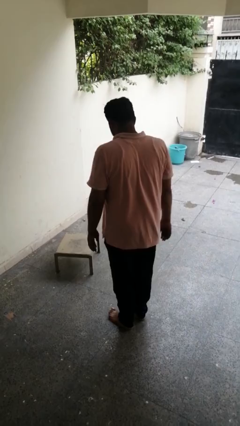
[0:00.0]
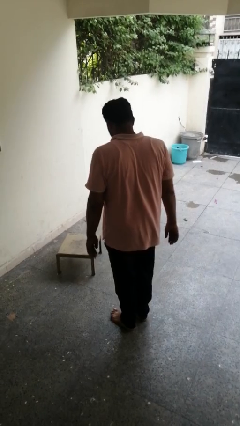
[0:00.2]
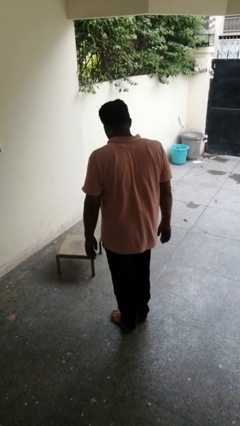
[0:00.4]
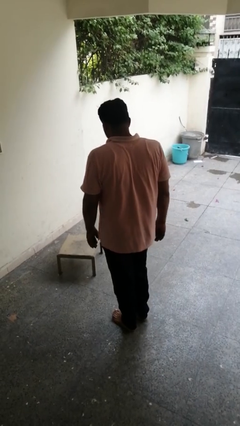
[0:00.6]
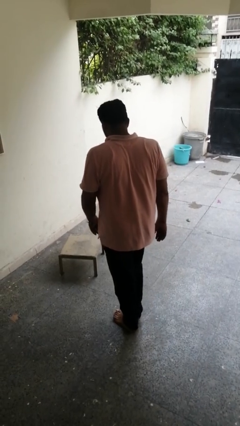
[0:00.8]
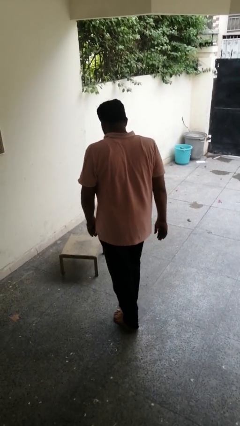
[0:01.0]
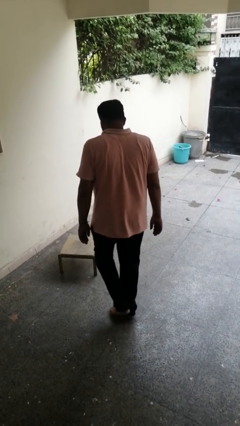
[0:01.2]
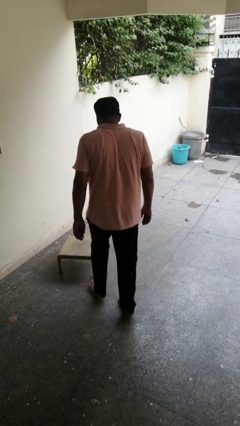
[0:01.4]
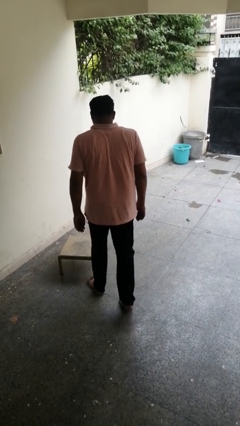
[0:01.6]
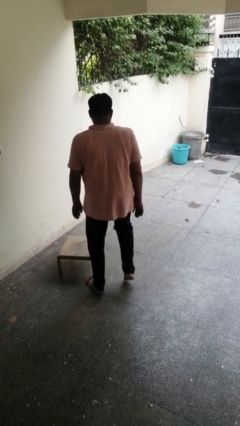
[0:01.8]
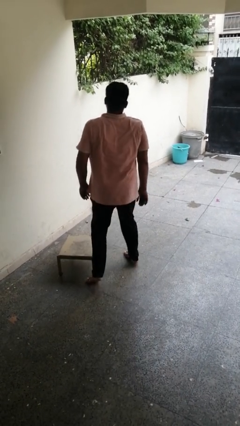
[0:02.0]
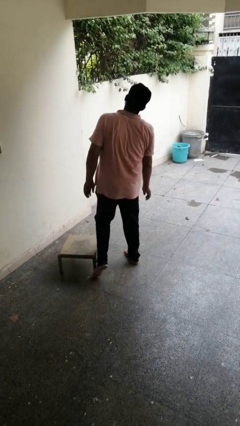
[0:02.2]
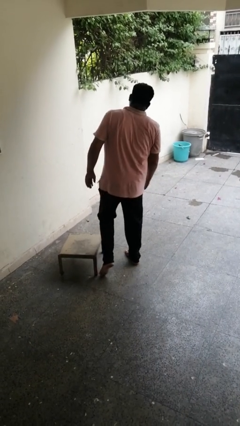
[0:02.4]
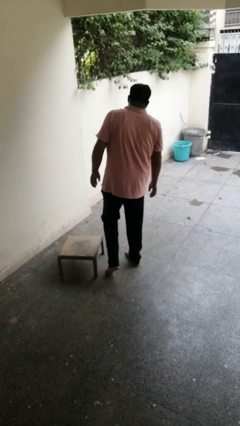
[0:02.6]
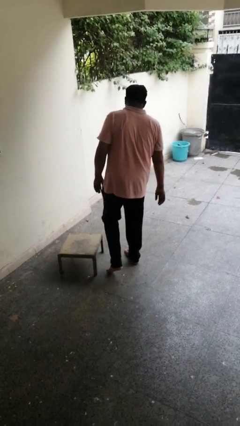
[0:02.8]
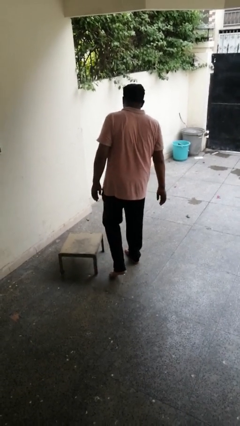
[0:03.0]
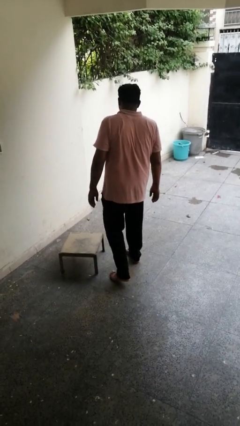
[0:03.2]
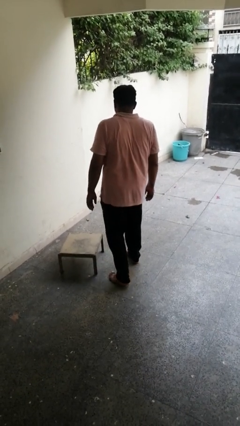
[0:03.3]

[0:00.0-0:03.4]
person stubs toe

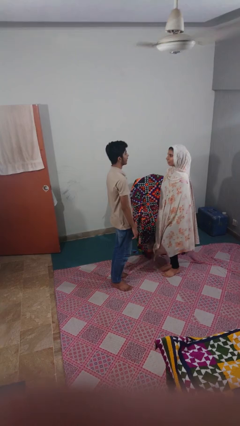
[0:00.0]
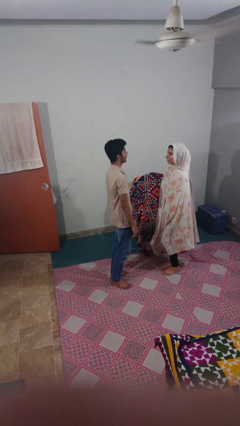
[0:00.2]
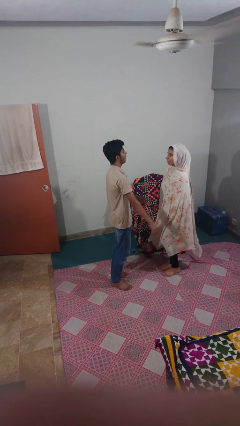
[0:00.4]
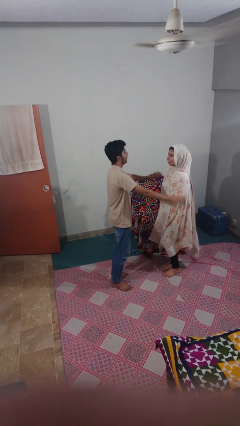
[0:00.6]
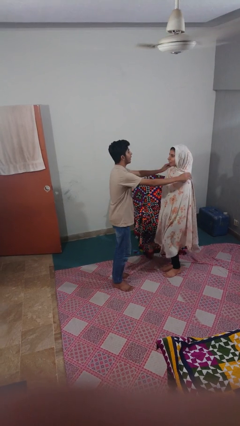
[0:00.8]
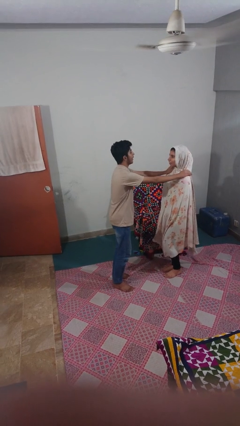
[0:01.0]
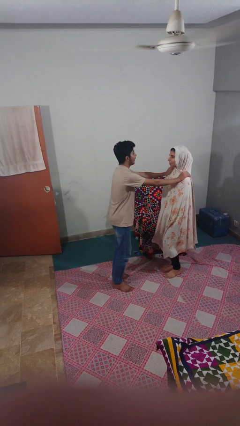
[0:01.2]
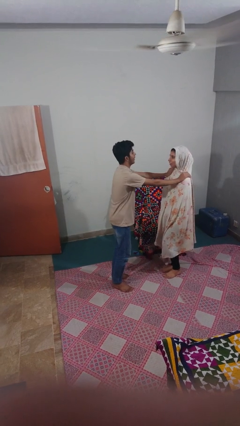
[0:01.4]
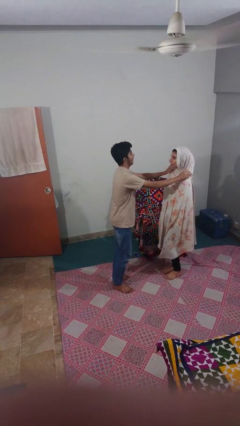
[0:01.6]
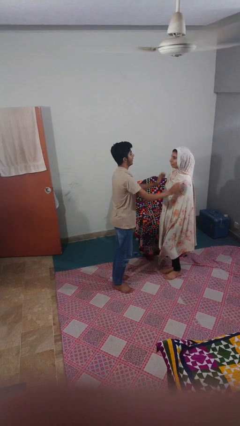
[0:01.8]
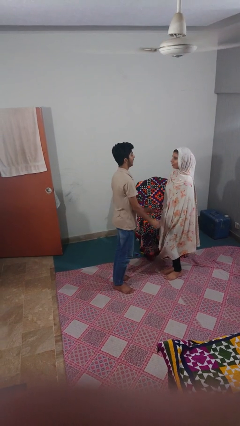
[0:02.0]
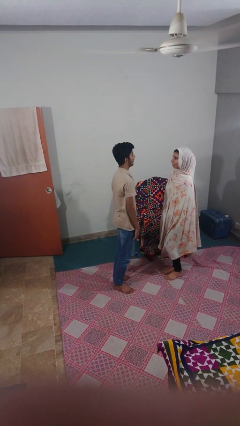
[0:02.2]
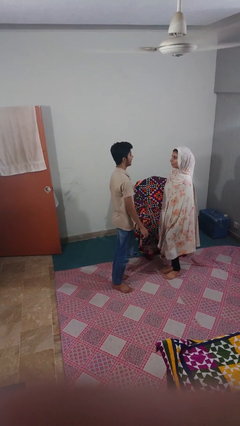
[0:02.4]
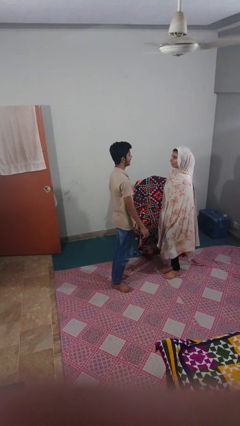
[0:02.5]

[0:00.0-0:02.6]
person pounds shoulders of person

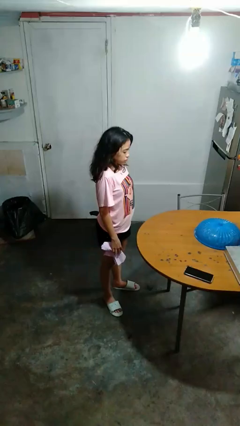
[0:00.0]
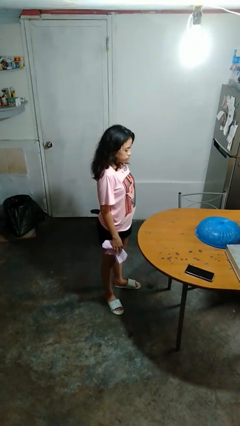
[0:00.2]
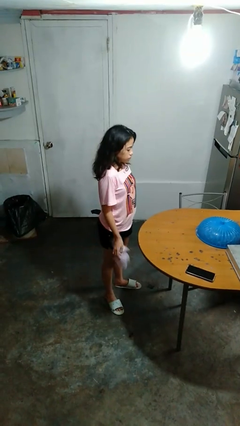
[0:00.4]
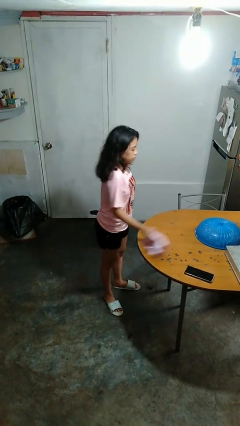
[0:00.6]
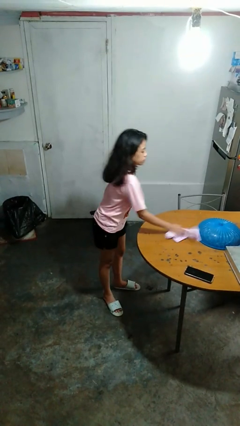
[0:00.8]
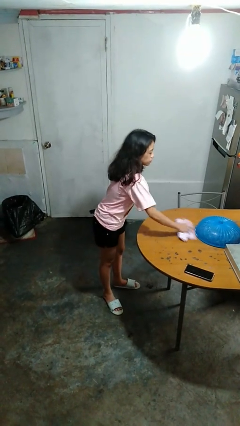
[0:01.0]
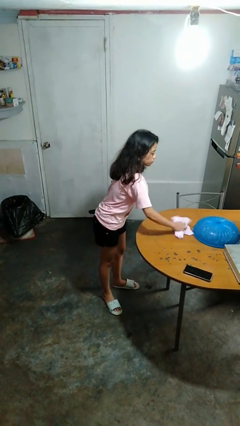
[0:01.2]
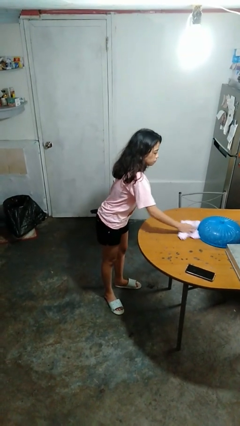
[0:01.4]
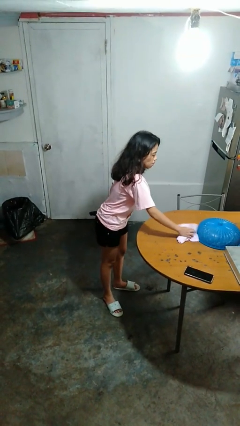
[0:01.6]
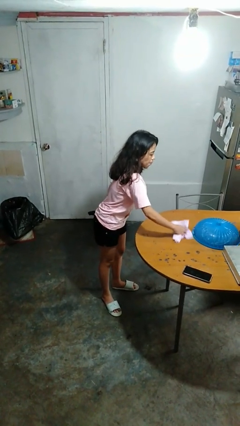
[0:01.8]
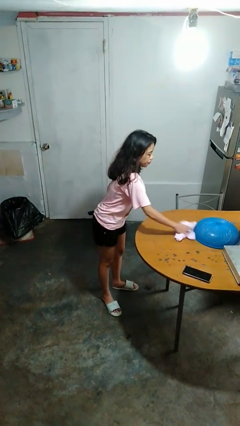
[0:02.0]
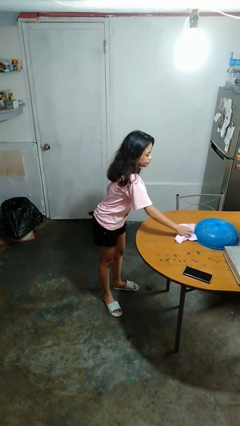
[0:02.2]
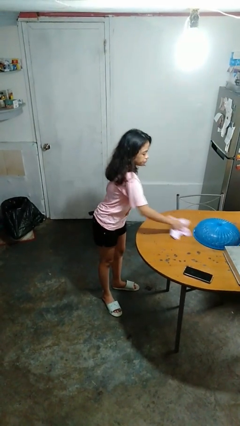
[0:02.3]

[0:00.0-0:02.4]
person cleans table with rag

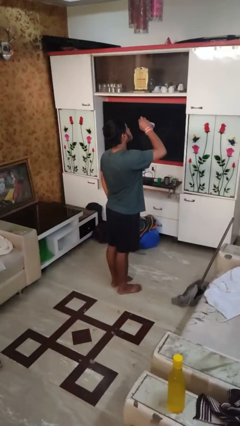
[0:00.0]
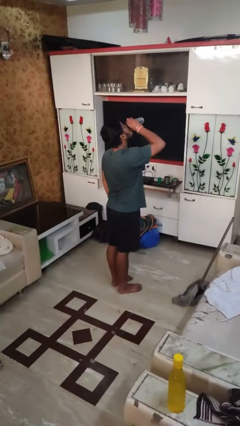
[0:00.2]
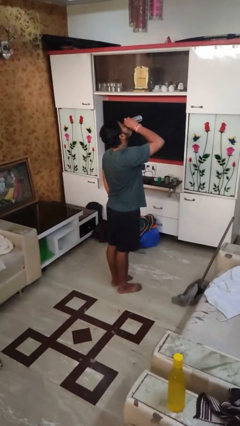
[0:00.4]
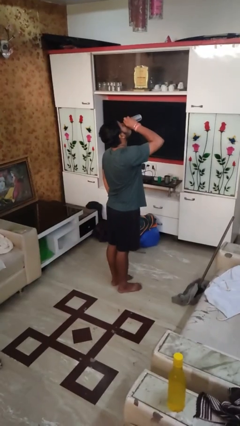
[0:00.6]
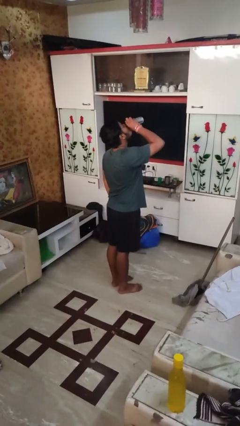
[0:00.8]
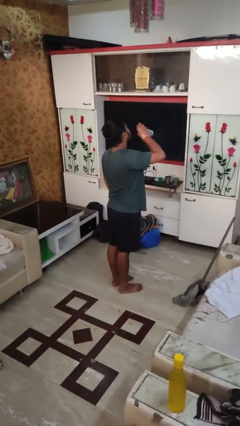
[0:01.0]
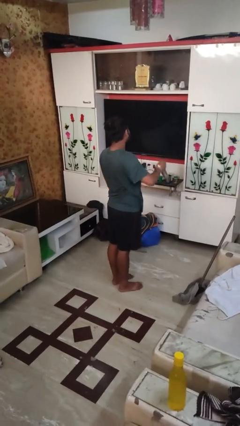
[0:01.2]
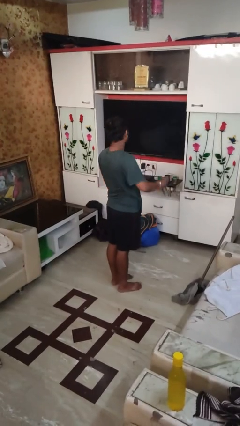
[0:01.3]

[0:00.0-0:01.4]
person drinks from beverage can

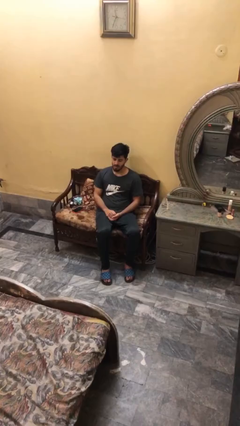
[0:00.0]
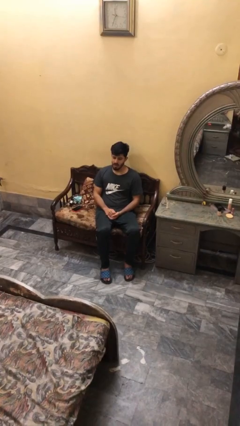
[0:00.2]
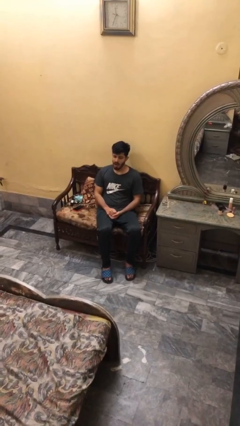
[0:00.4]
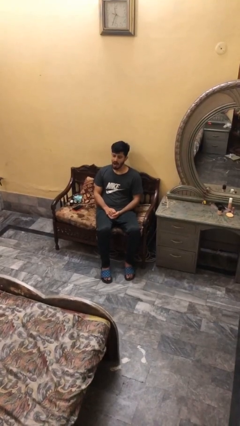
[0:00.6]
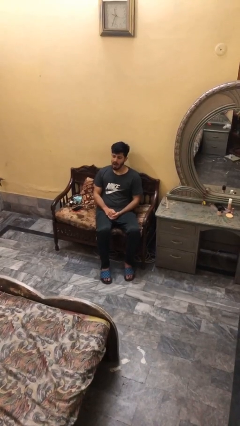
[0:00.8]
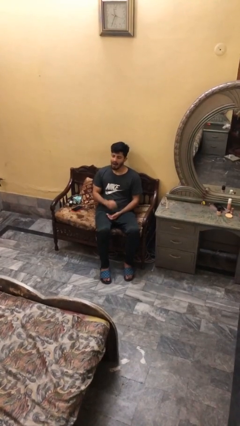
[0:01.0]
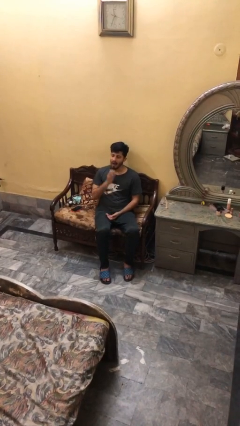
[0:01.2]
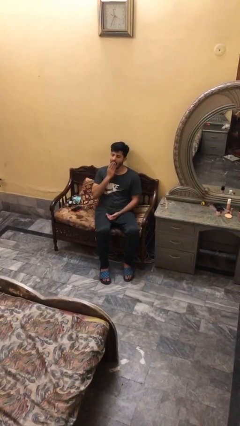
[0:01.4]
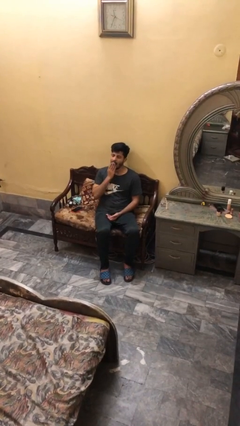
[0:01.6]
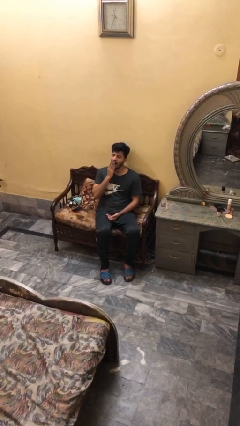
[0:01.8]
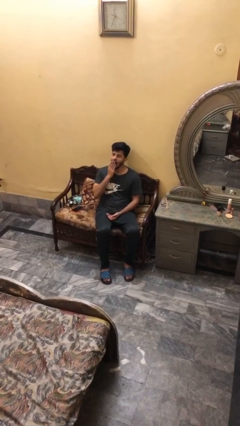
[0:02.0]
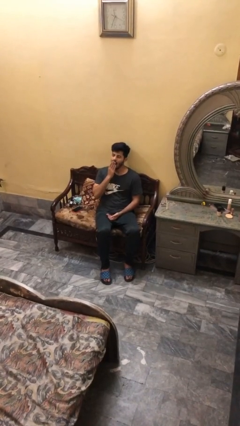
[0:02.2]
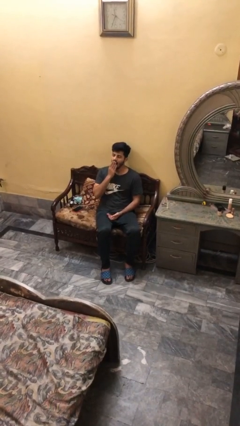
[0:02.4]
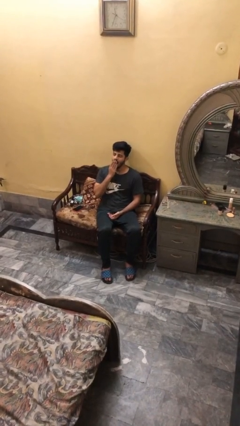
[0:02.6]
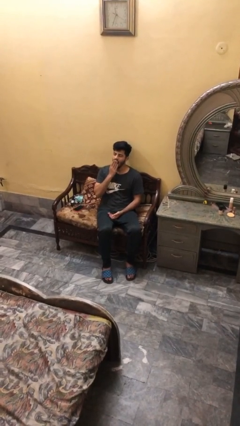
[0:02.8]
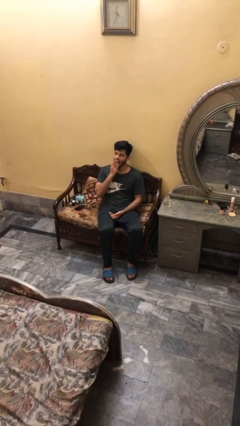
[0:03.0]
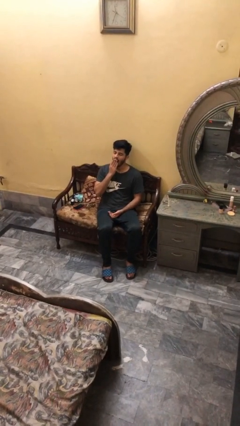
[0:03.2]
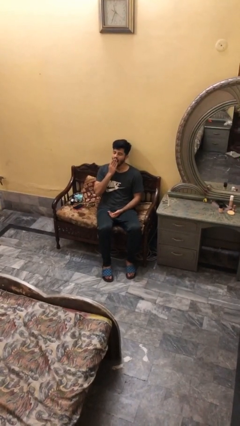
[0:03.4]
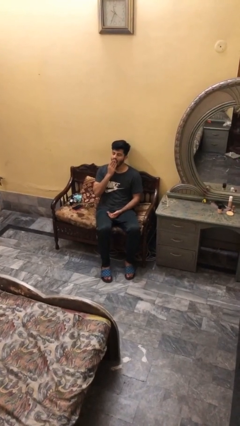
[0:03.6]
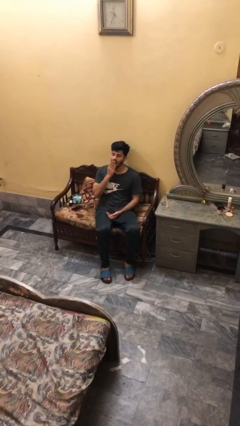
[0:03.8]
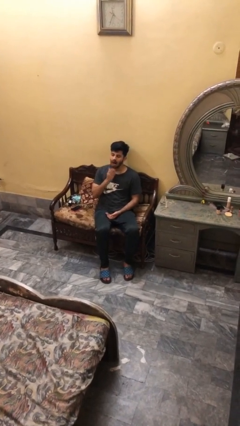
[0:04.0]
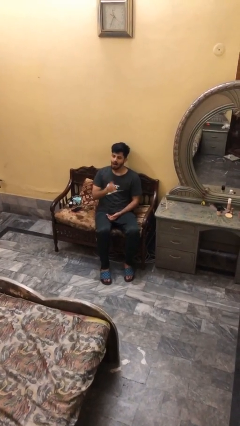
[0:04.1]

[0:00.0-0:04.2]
person yawns

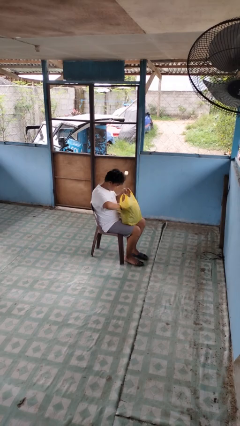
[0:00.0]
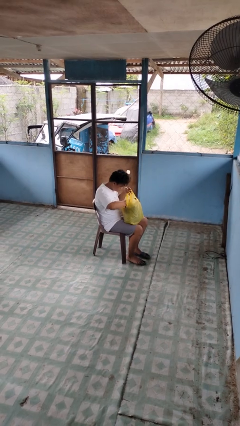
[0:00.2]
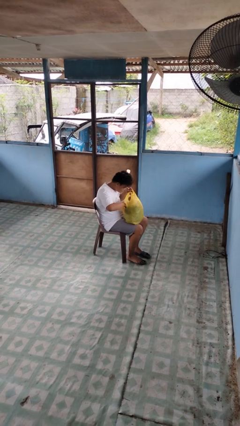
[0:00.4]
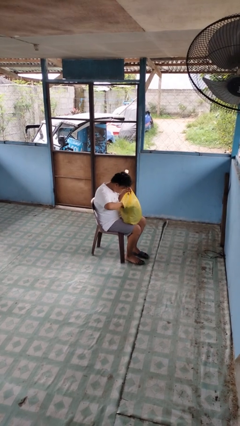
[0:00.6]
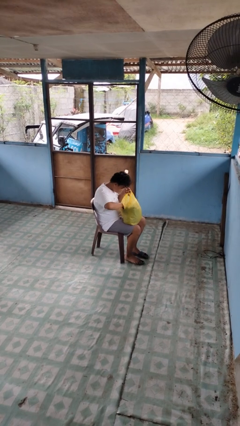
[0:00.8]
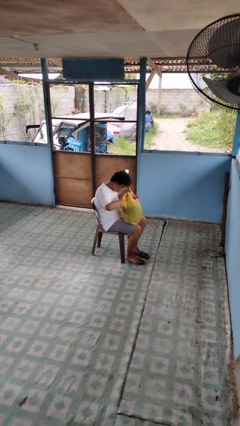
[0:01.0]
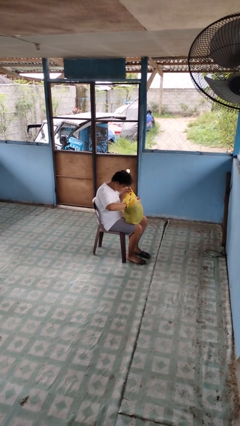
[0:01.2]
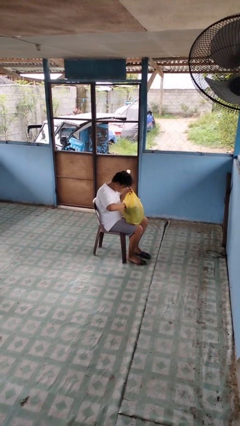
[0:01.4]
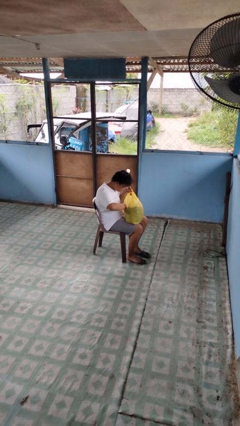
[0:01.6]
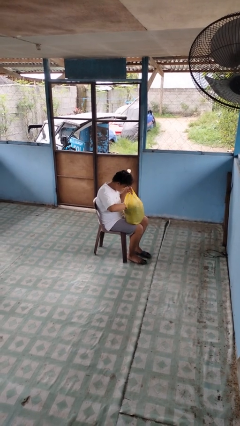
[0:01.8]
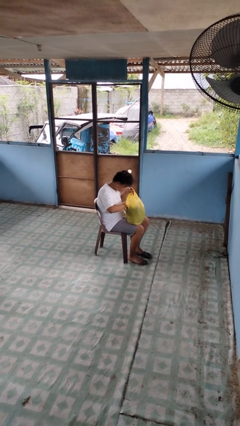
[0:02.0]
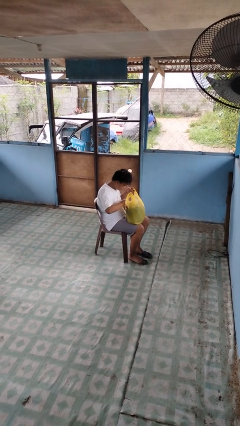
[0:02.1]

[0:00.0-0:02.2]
person searches in bag

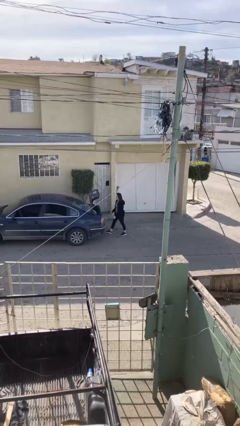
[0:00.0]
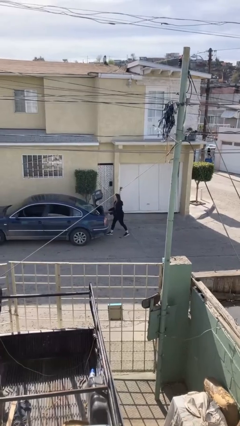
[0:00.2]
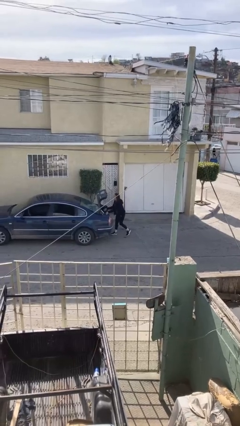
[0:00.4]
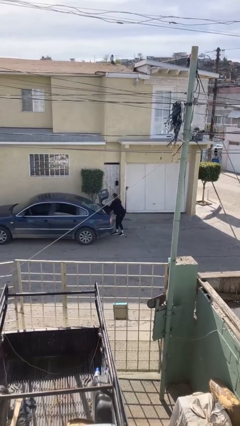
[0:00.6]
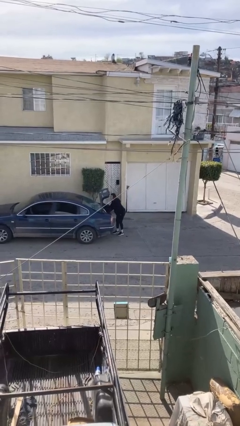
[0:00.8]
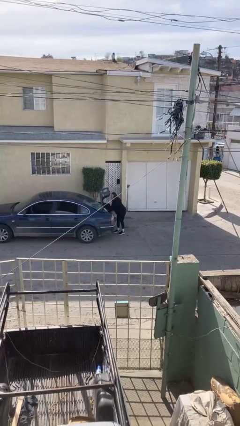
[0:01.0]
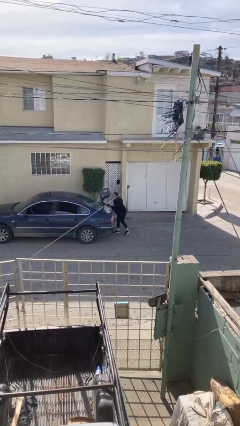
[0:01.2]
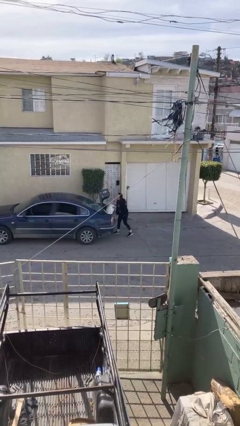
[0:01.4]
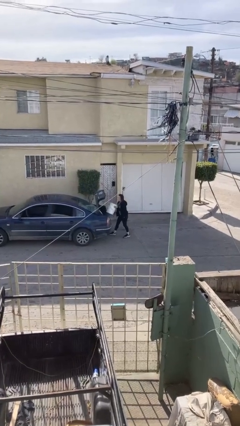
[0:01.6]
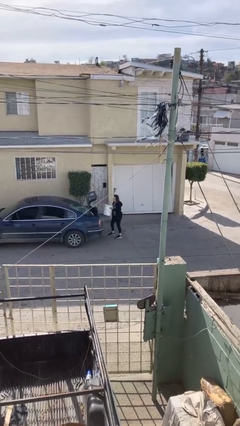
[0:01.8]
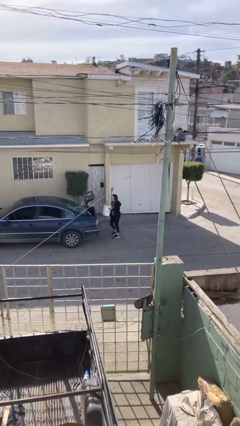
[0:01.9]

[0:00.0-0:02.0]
person unloads car
